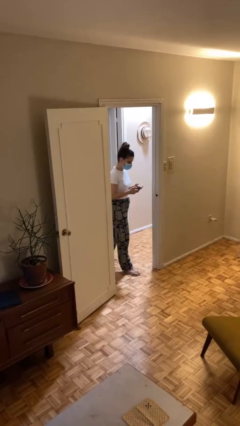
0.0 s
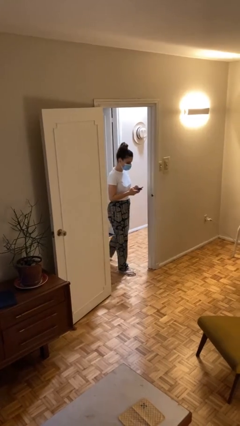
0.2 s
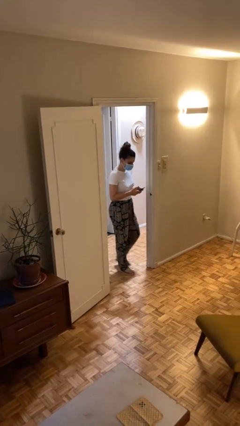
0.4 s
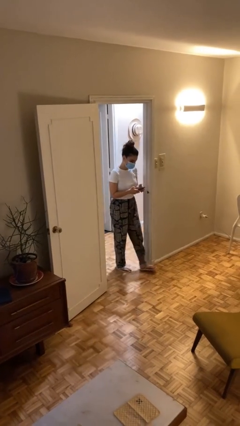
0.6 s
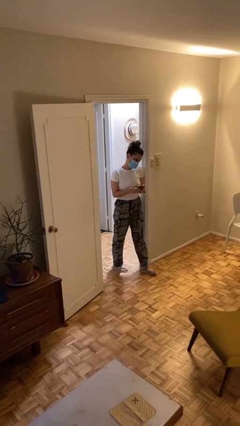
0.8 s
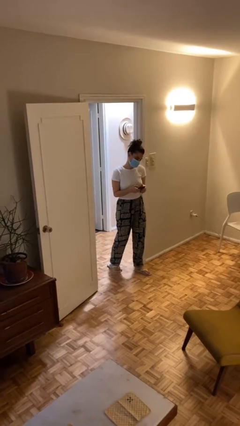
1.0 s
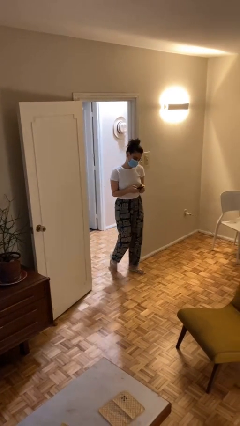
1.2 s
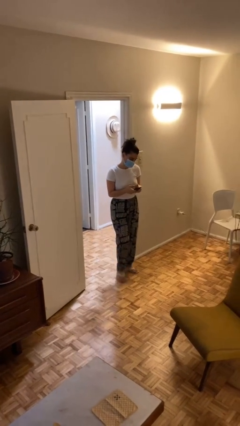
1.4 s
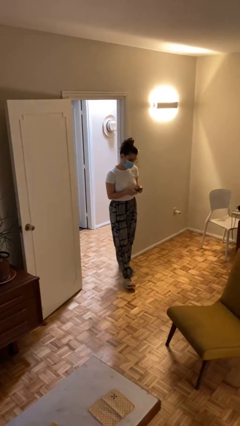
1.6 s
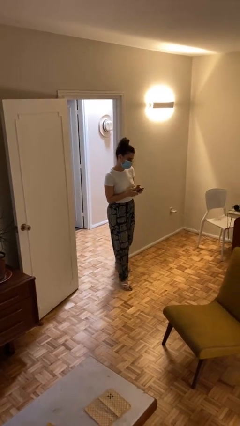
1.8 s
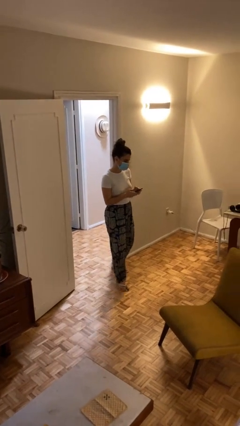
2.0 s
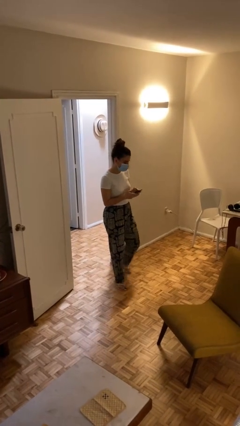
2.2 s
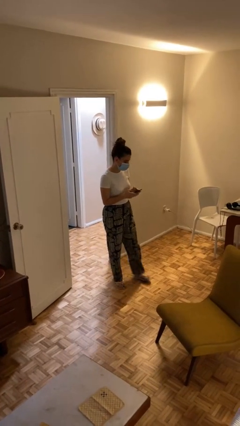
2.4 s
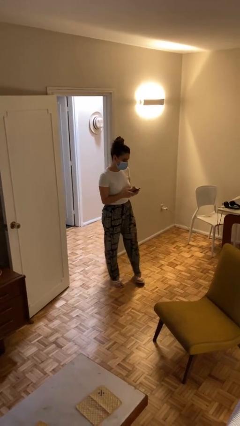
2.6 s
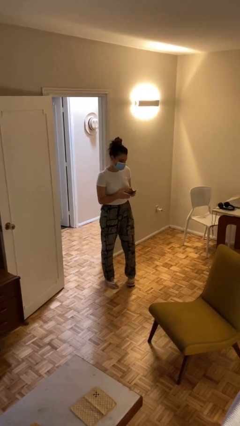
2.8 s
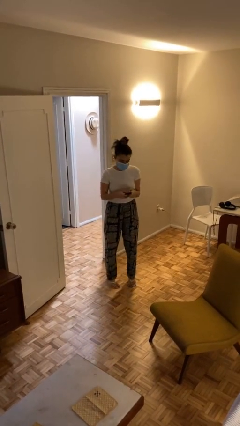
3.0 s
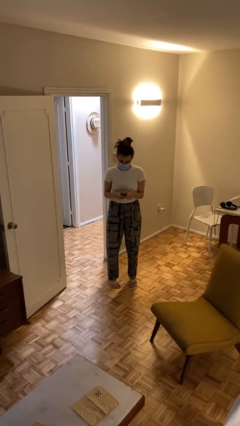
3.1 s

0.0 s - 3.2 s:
person enters scene through structure

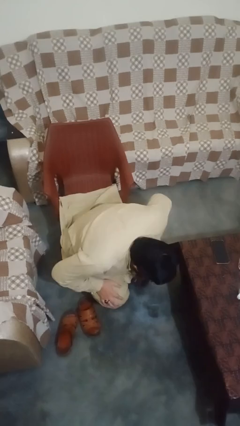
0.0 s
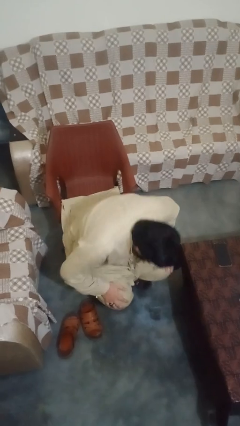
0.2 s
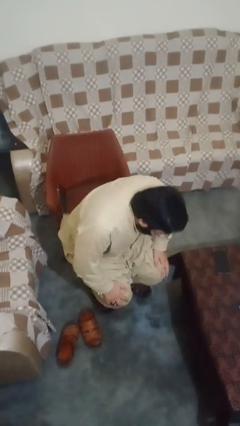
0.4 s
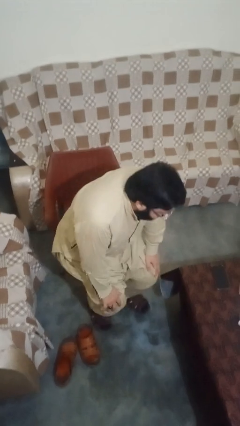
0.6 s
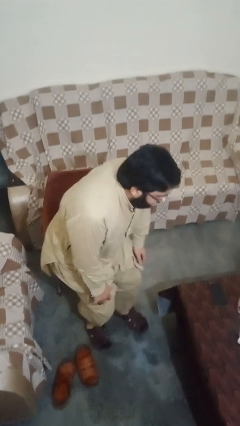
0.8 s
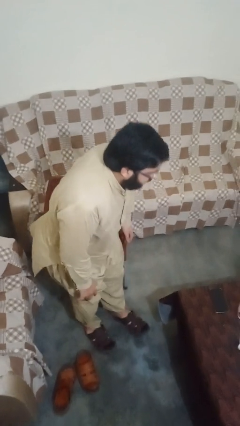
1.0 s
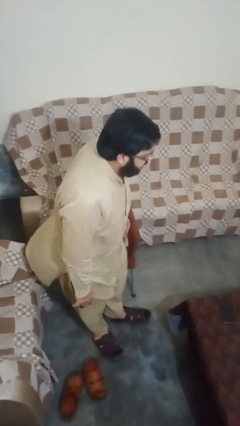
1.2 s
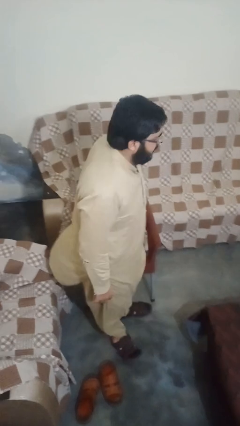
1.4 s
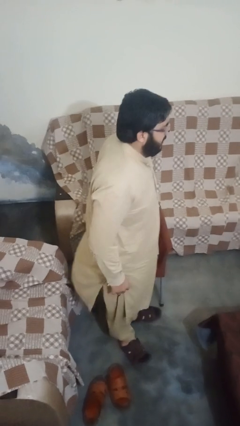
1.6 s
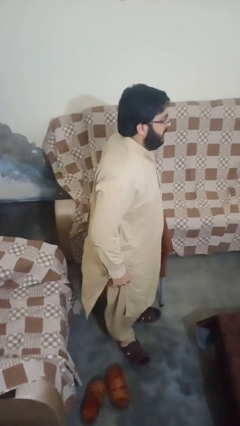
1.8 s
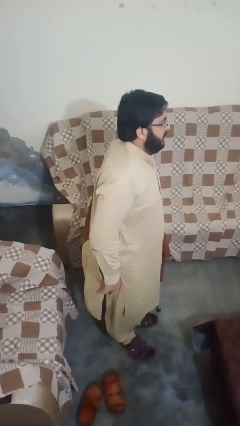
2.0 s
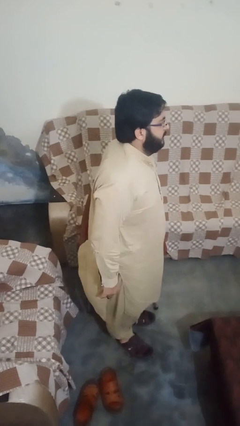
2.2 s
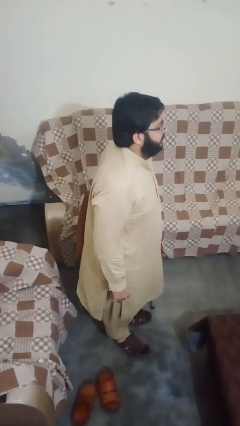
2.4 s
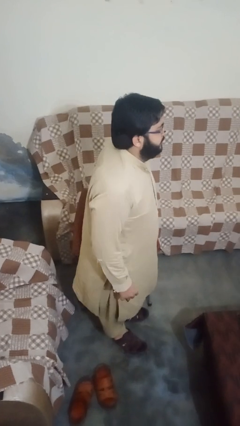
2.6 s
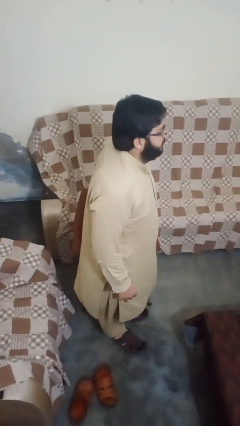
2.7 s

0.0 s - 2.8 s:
person stands up from floor

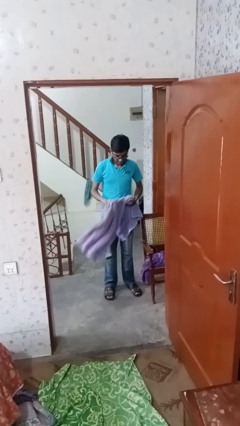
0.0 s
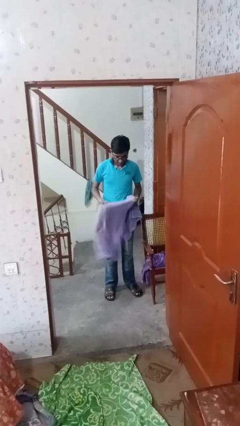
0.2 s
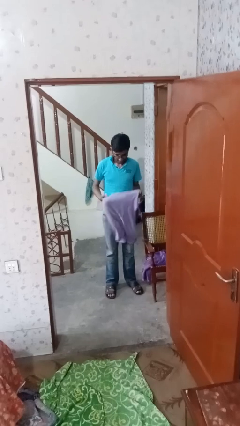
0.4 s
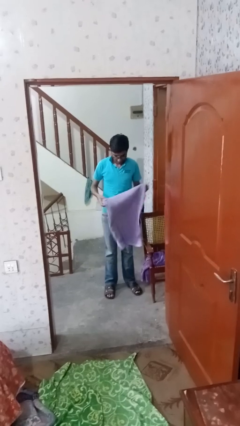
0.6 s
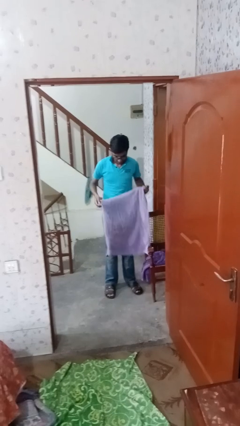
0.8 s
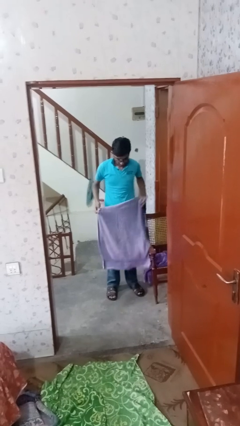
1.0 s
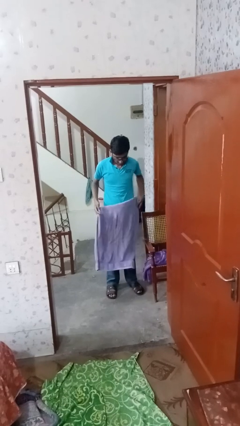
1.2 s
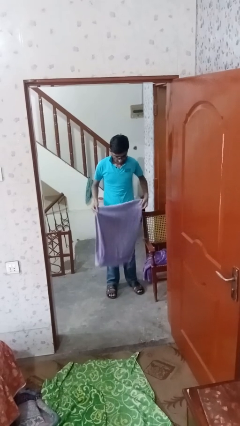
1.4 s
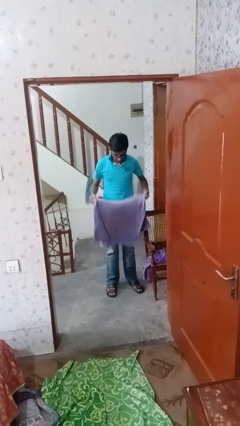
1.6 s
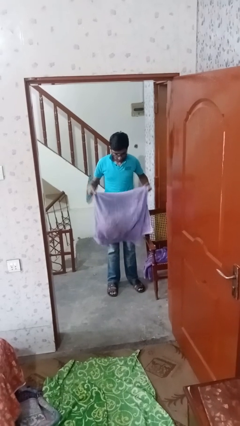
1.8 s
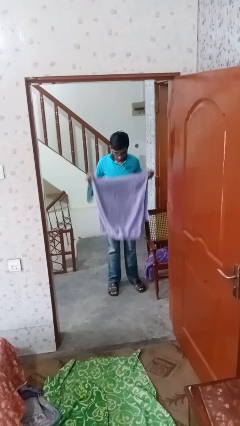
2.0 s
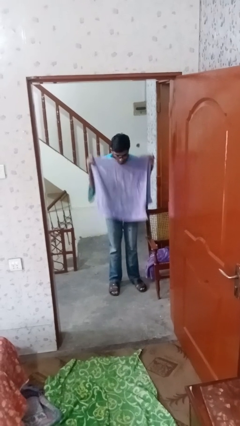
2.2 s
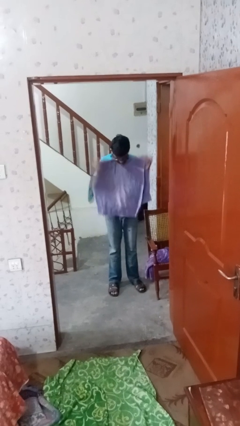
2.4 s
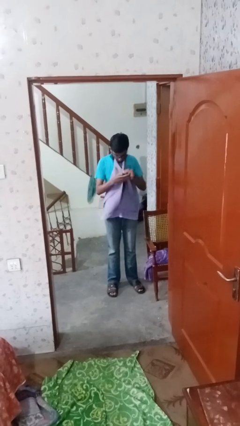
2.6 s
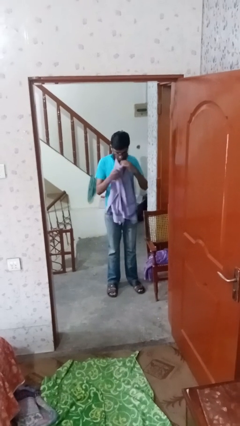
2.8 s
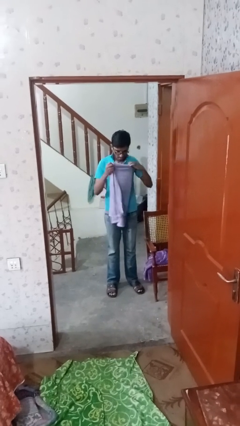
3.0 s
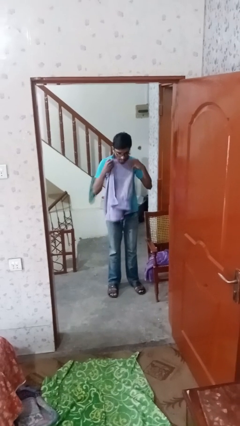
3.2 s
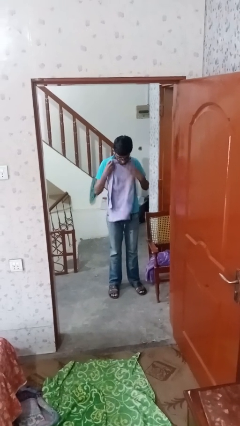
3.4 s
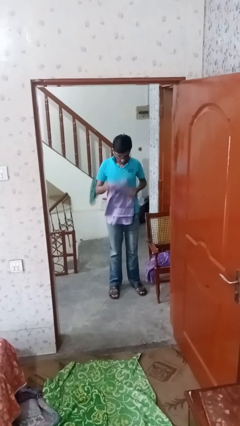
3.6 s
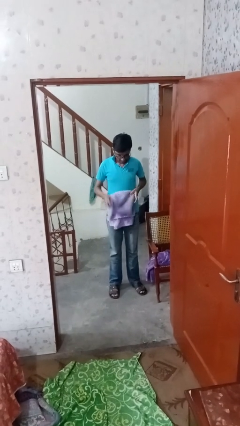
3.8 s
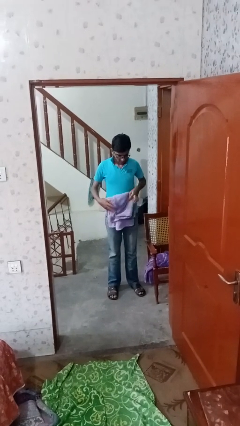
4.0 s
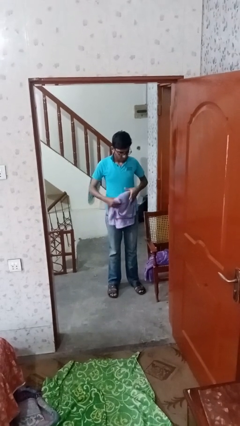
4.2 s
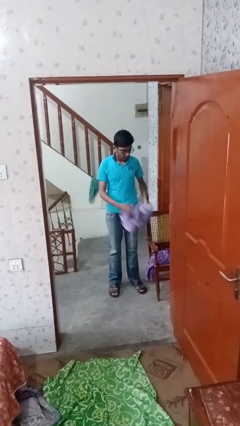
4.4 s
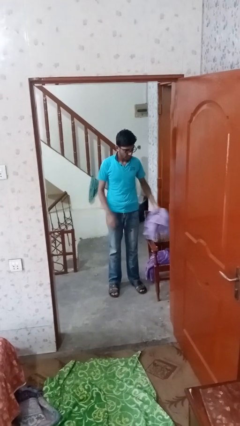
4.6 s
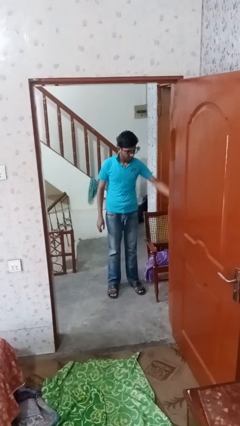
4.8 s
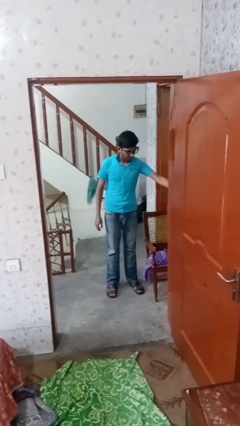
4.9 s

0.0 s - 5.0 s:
person folds towel

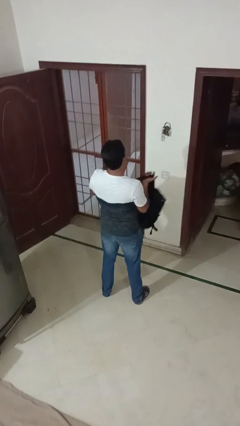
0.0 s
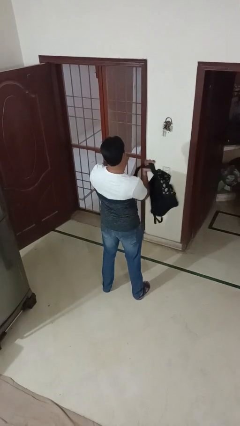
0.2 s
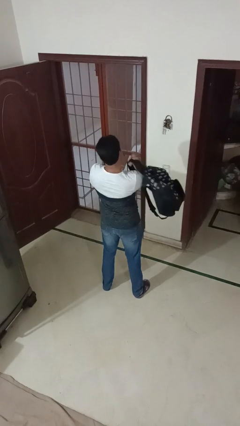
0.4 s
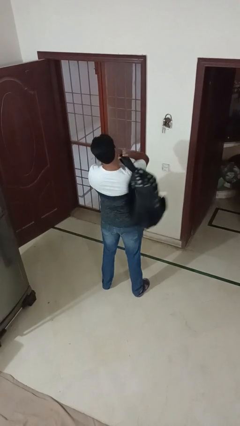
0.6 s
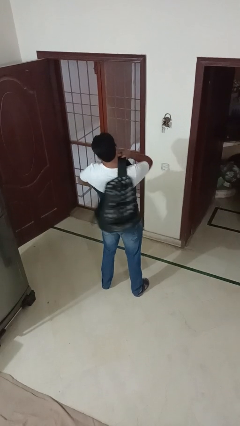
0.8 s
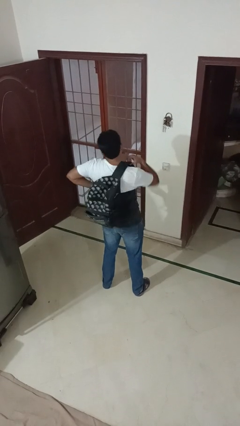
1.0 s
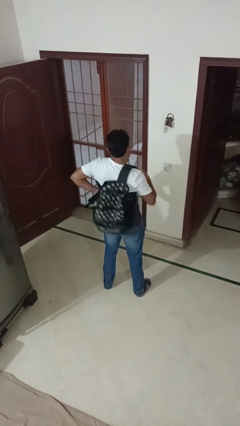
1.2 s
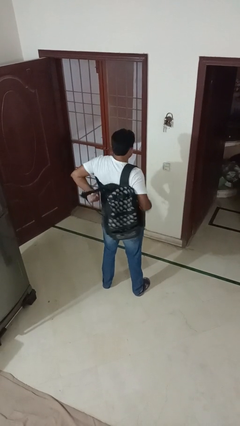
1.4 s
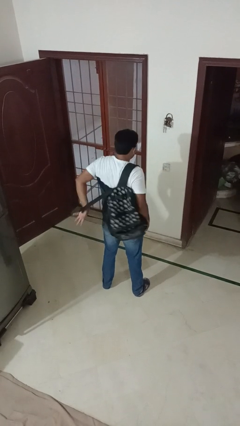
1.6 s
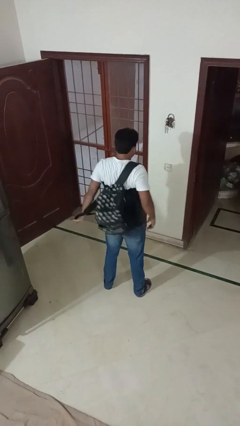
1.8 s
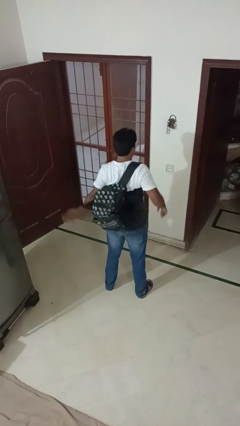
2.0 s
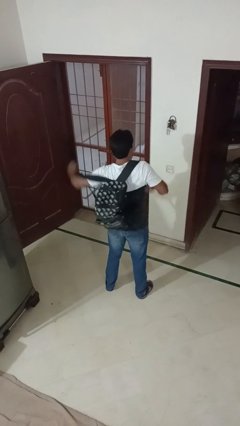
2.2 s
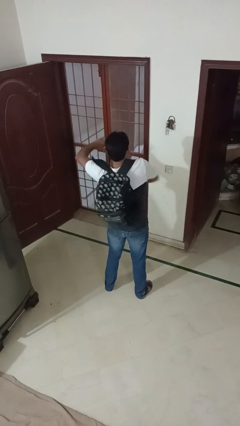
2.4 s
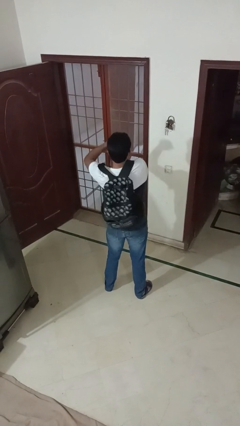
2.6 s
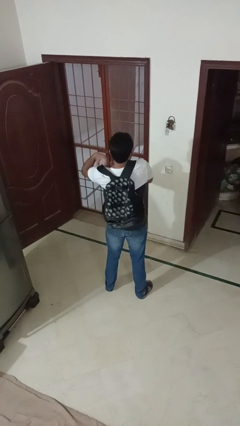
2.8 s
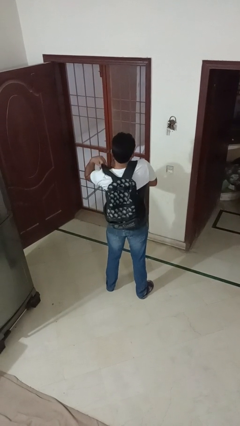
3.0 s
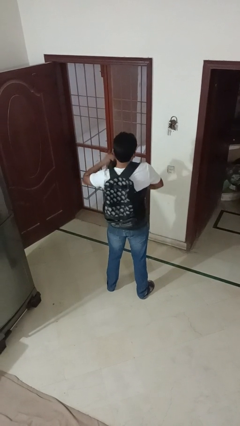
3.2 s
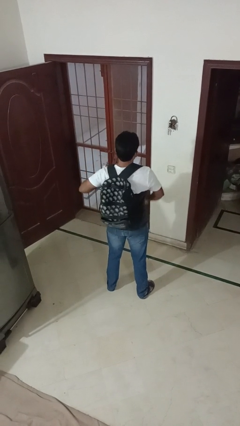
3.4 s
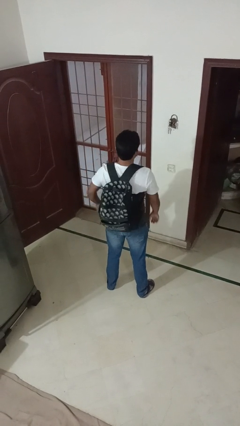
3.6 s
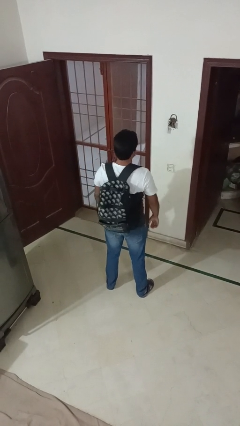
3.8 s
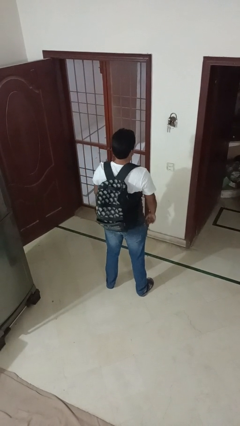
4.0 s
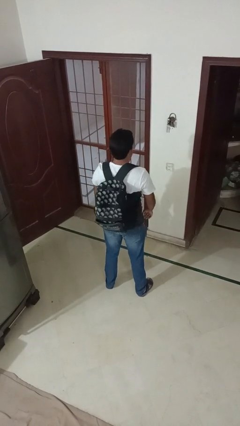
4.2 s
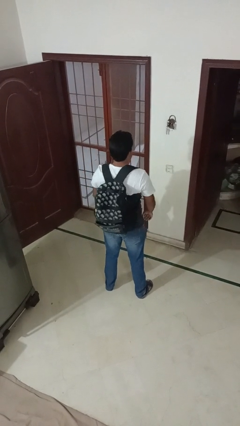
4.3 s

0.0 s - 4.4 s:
person puts on backpack

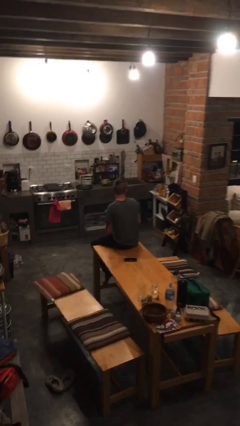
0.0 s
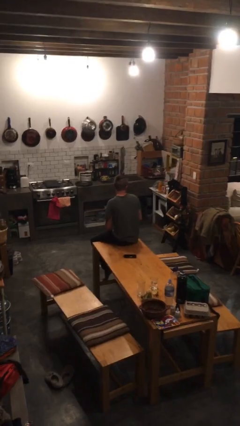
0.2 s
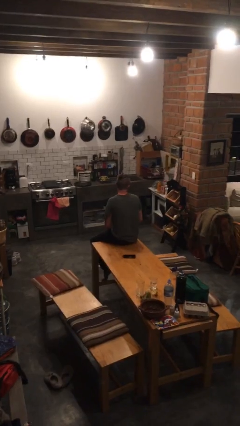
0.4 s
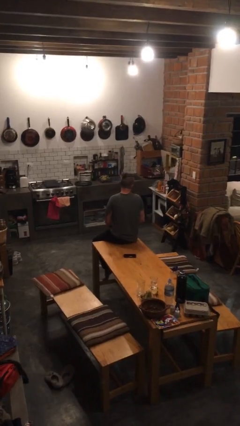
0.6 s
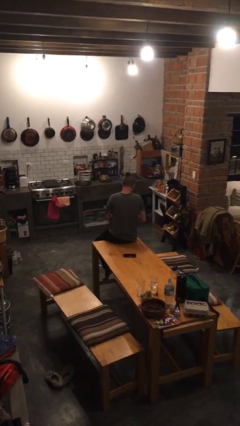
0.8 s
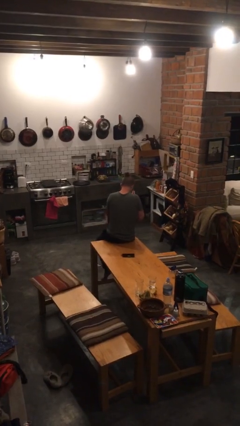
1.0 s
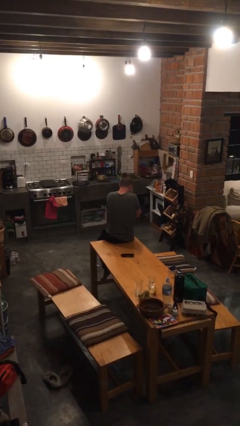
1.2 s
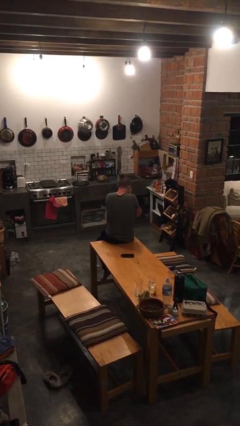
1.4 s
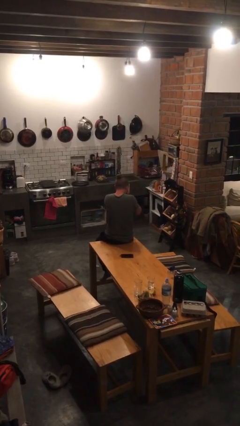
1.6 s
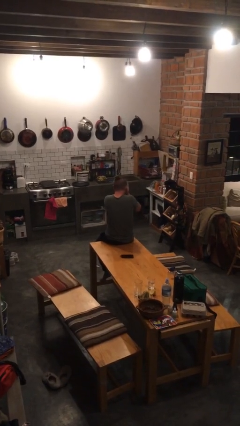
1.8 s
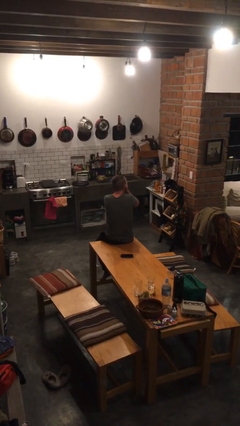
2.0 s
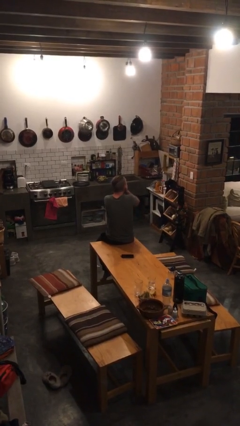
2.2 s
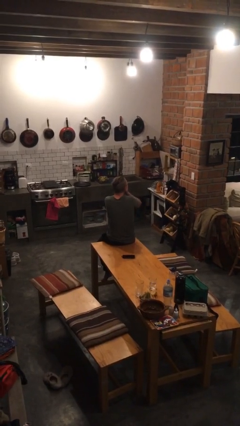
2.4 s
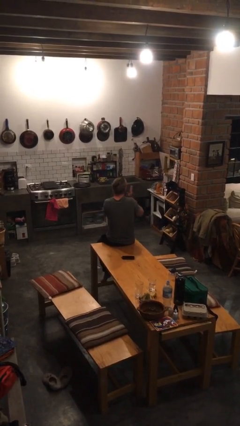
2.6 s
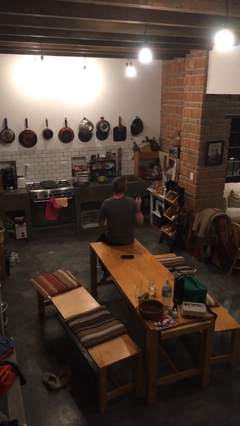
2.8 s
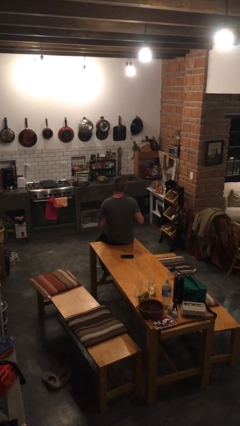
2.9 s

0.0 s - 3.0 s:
person covers face with hands
